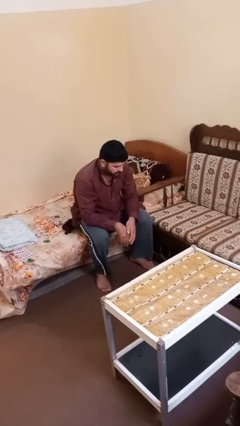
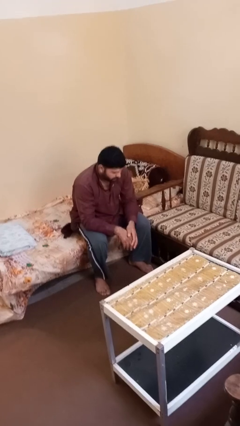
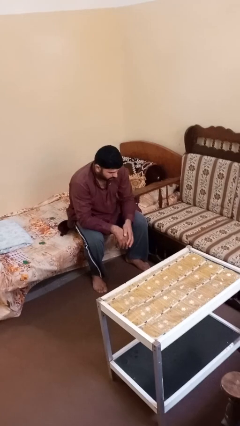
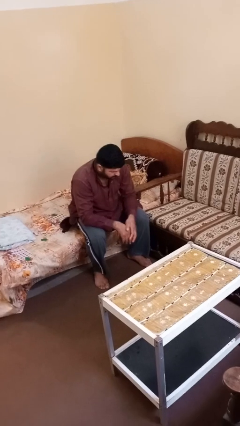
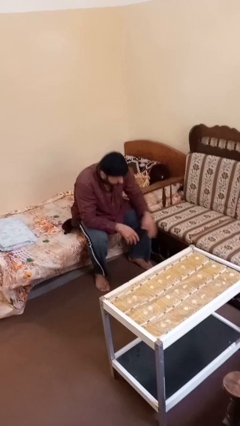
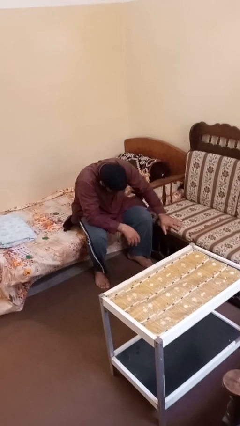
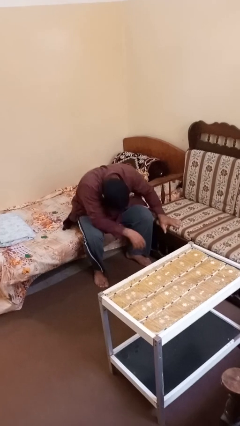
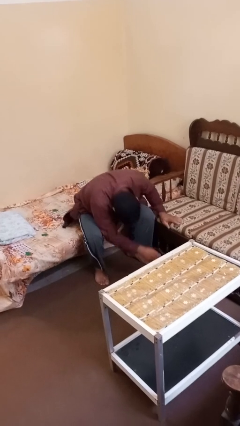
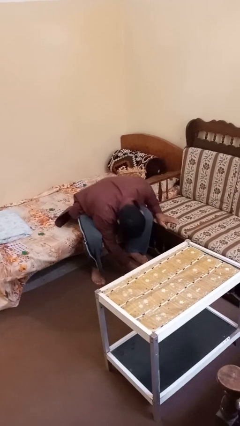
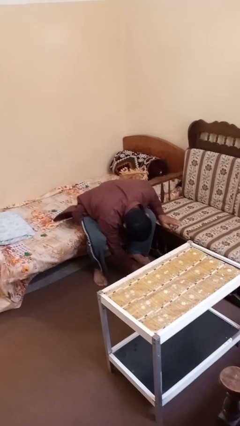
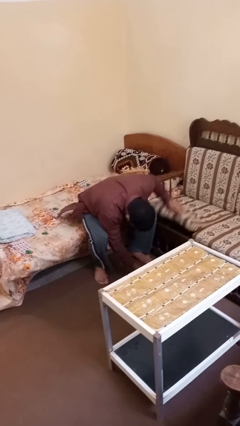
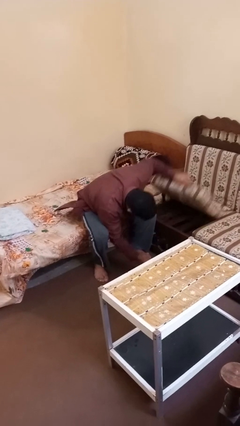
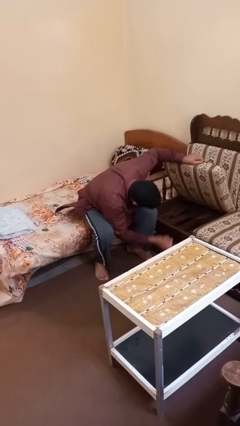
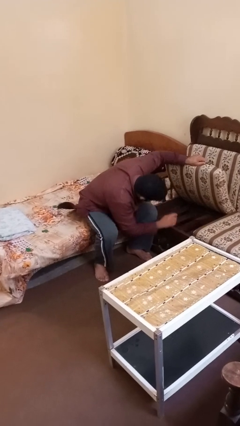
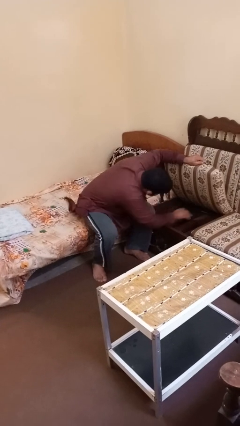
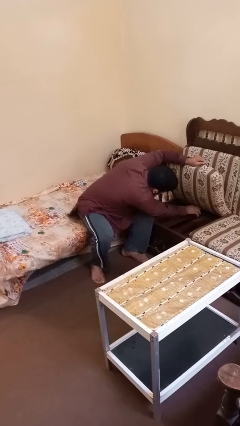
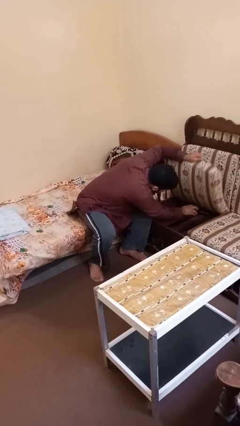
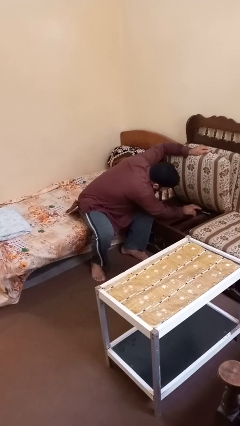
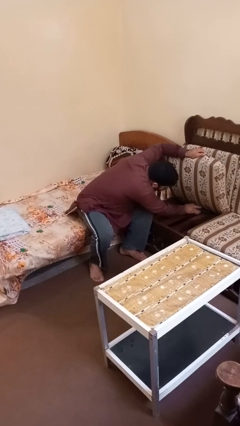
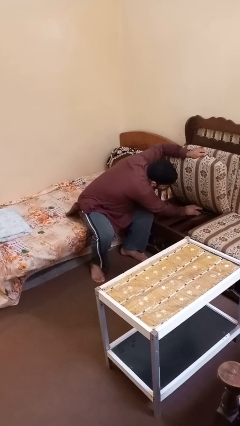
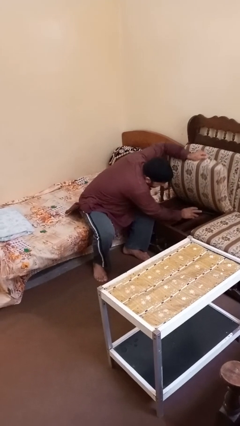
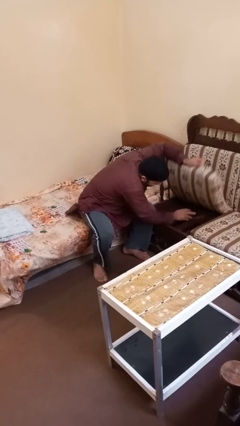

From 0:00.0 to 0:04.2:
person searches under couch

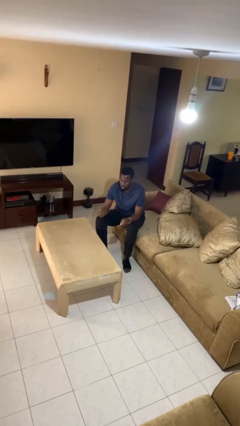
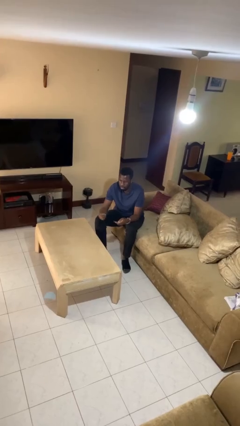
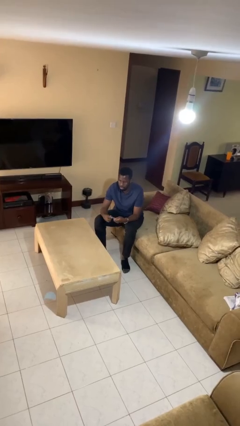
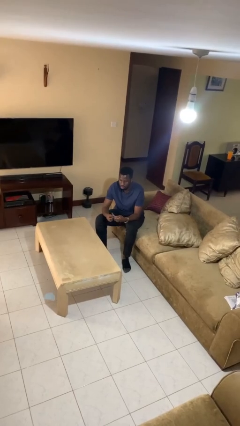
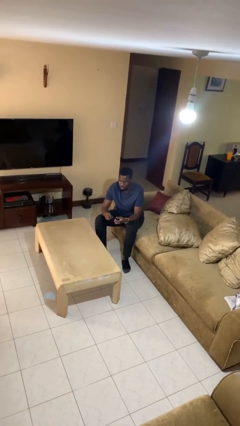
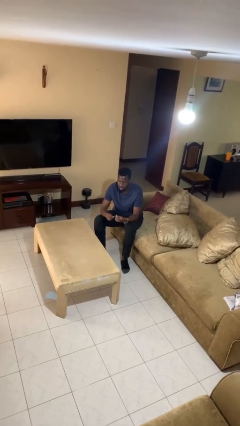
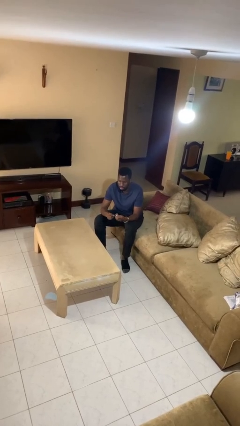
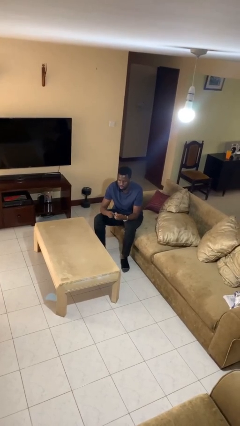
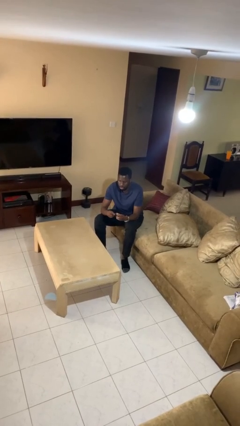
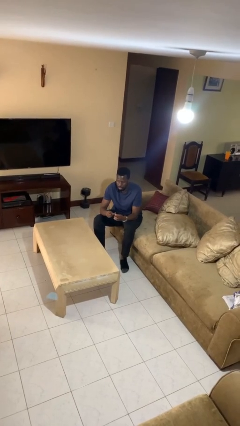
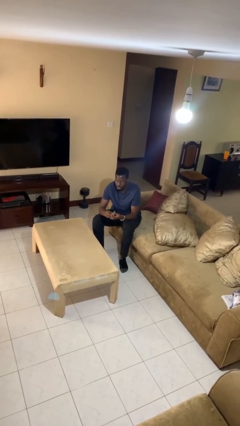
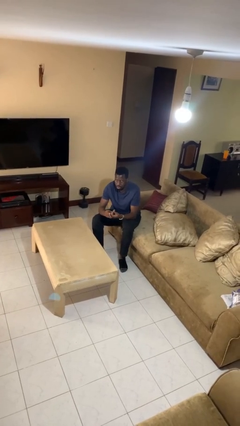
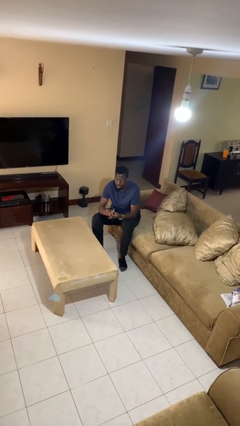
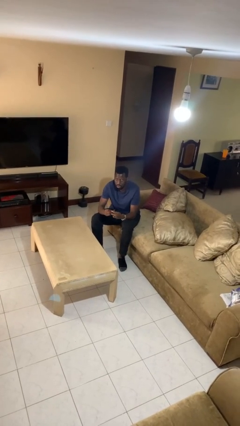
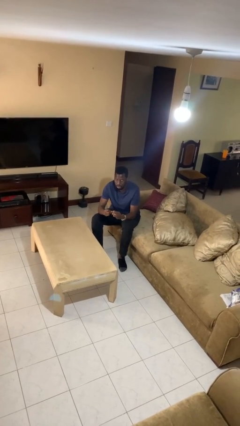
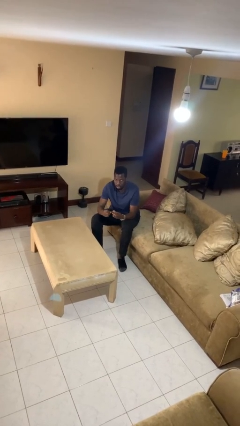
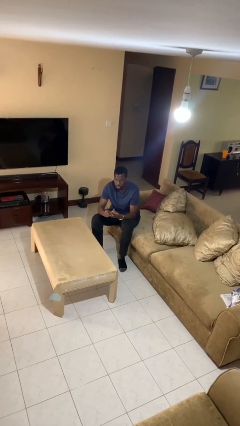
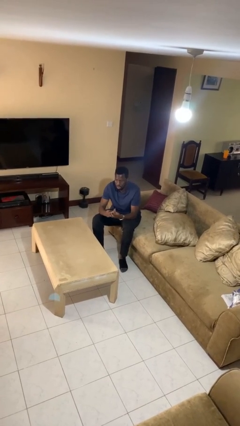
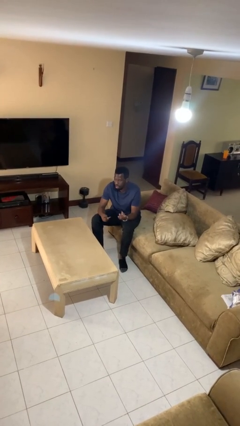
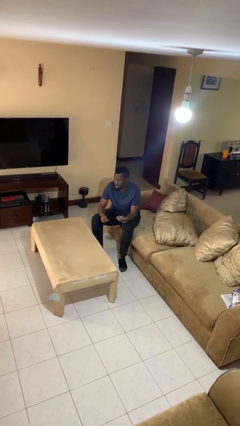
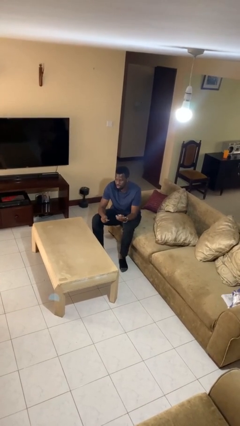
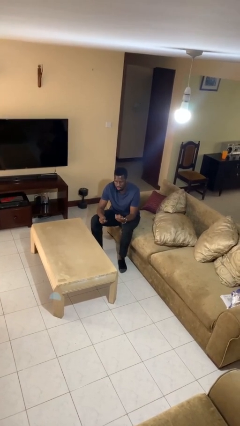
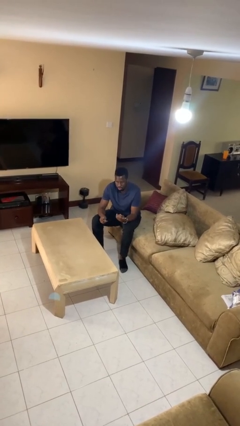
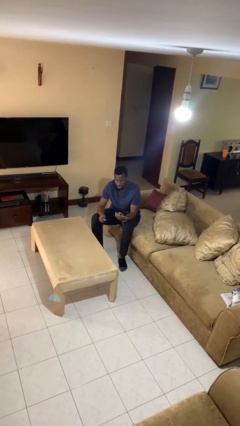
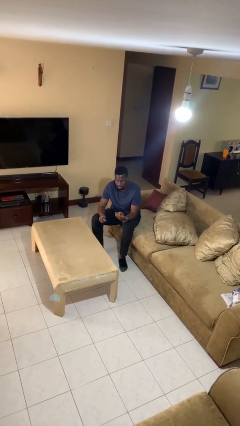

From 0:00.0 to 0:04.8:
person files fingernails

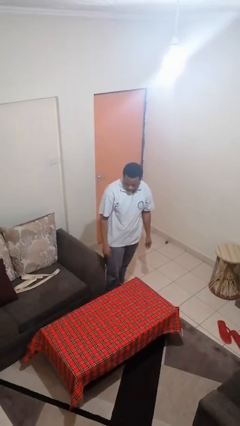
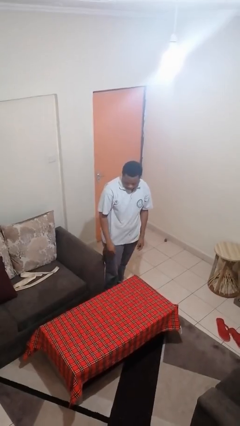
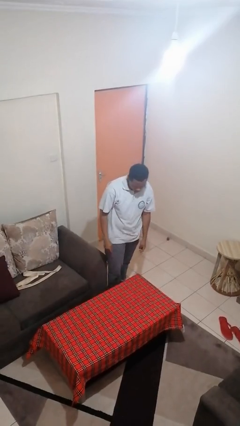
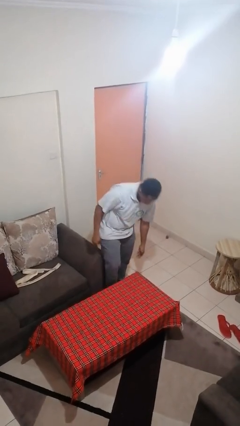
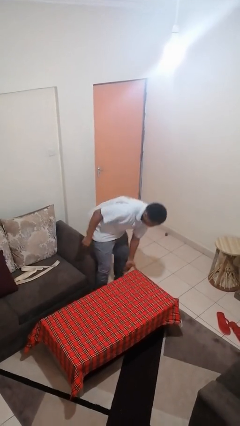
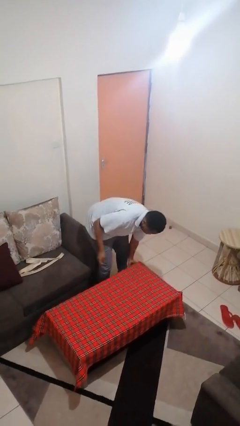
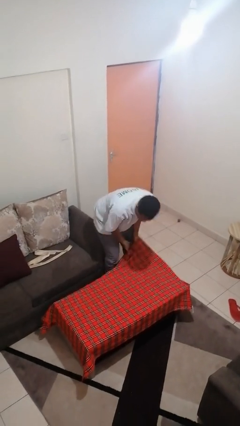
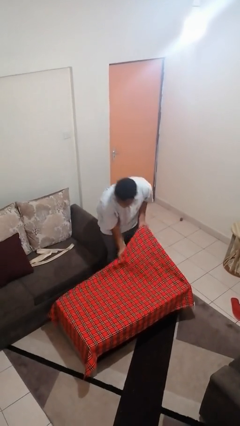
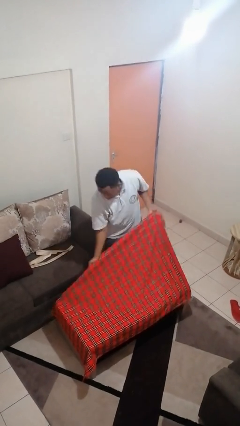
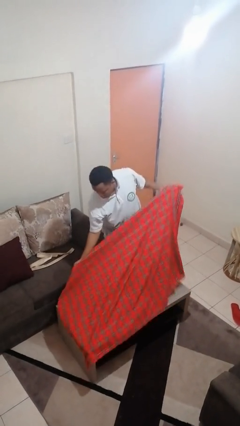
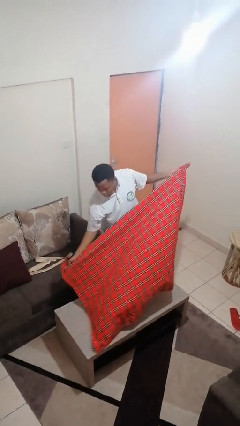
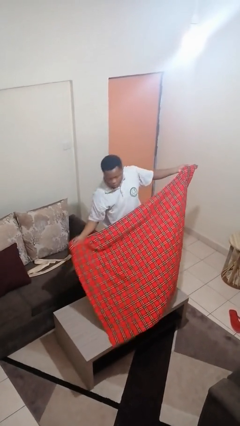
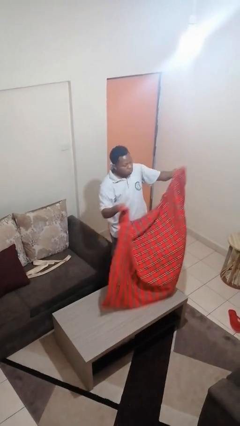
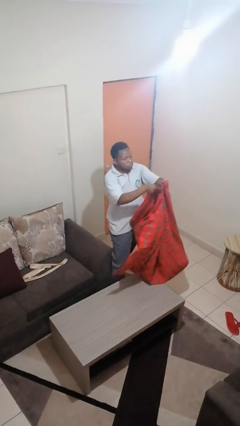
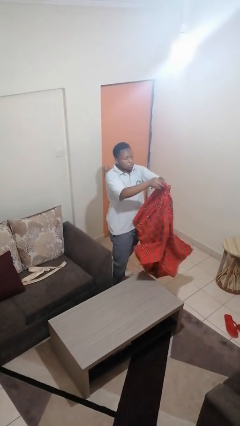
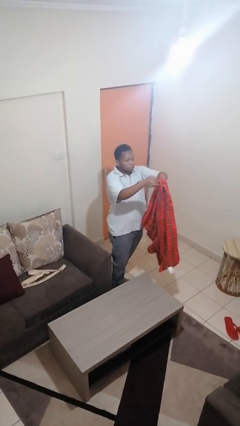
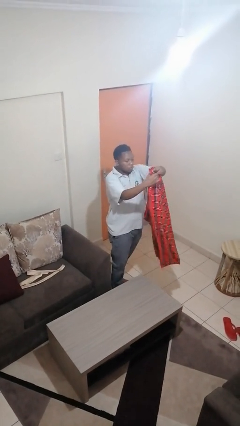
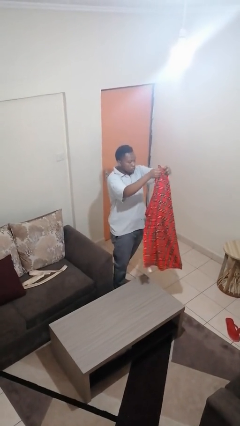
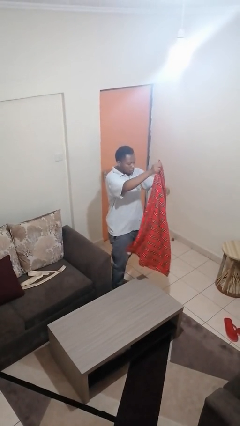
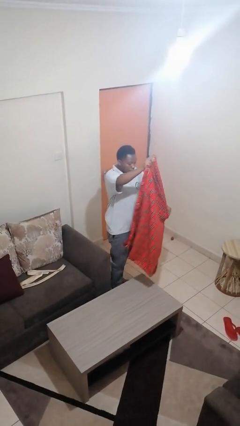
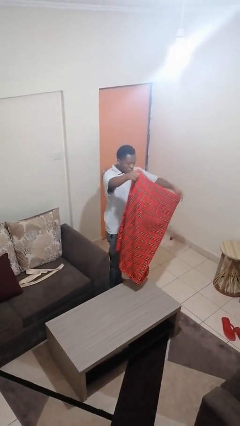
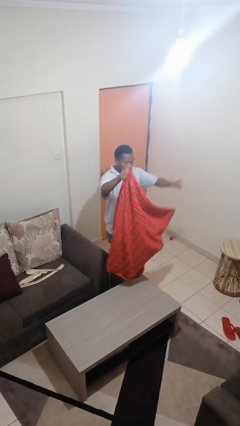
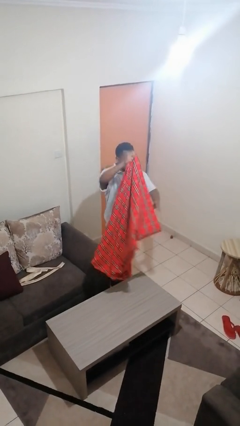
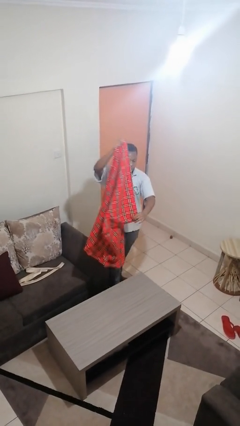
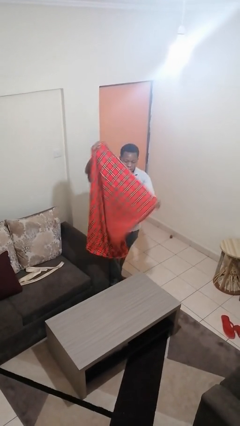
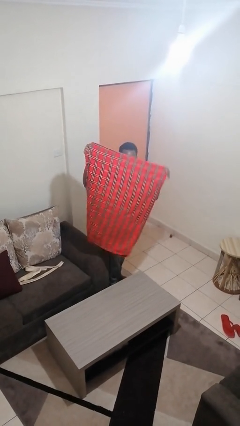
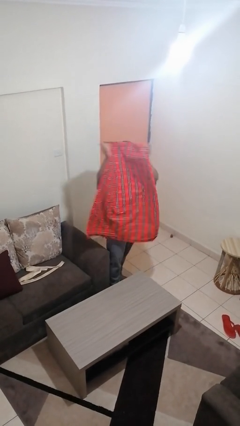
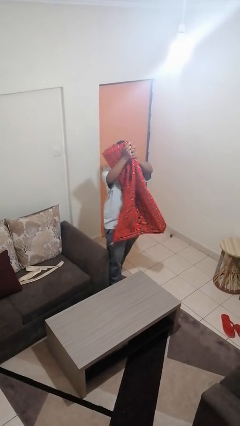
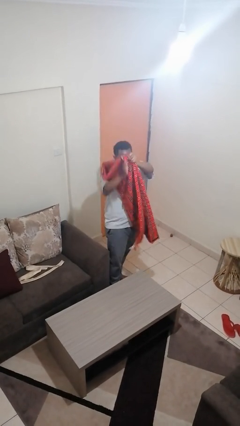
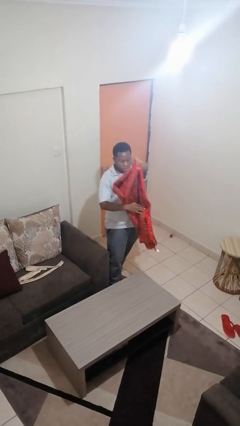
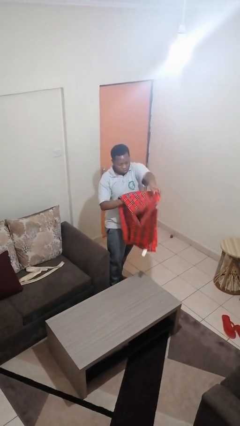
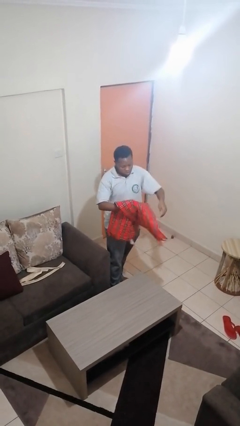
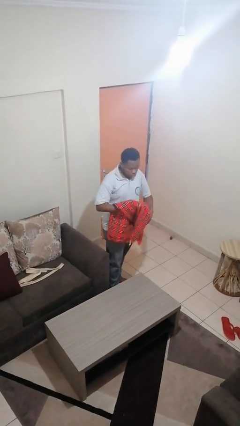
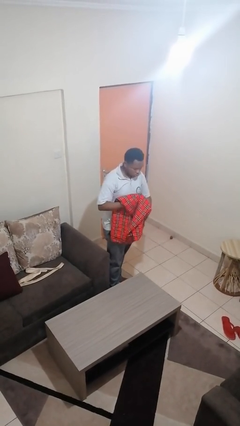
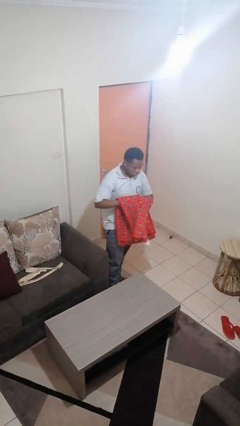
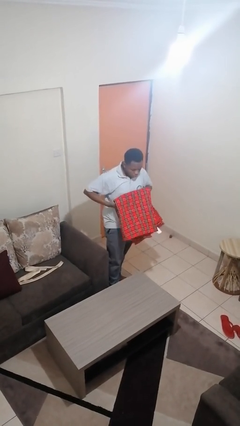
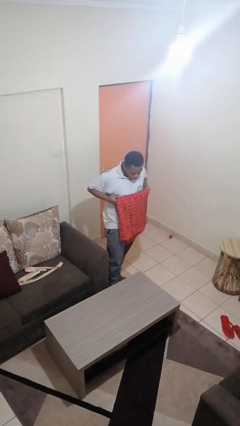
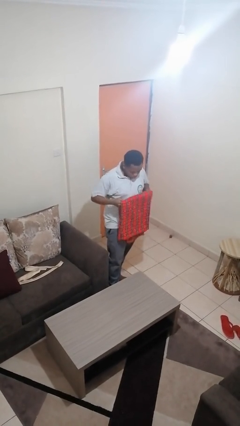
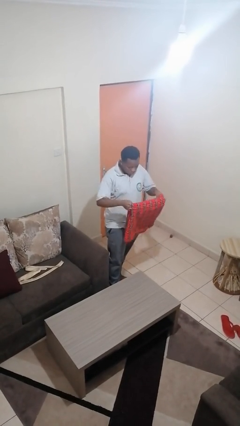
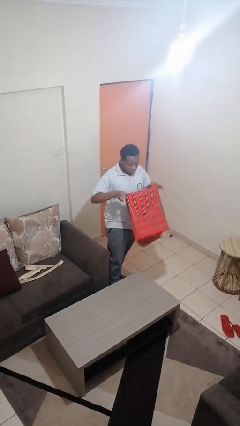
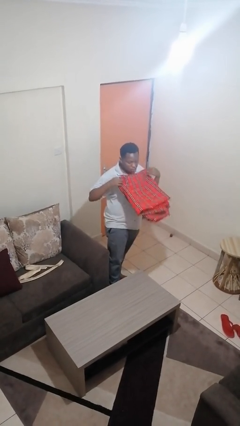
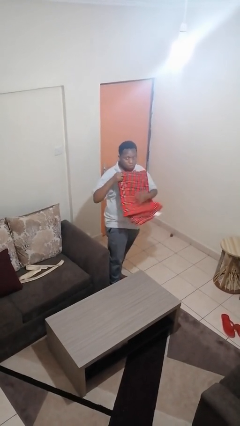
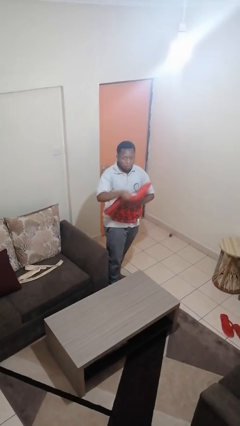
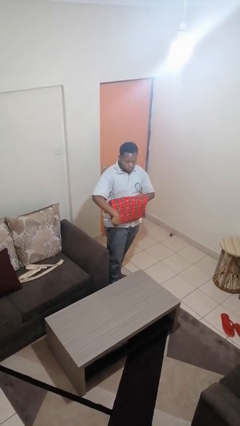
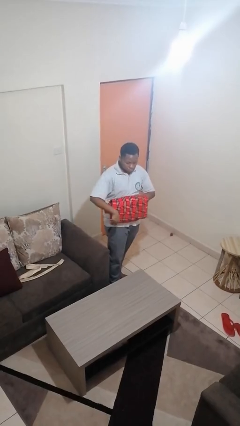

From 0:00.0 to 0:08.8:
person folds tablecloth

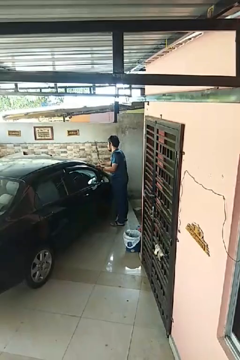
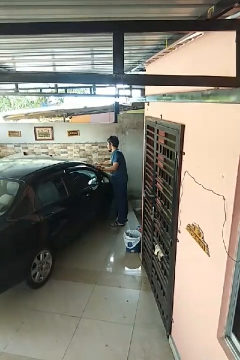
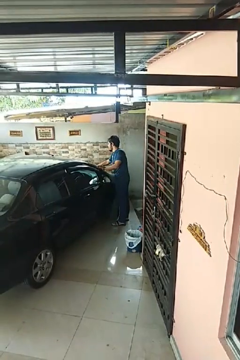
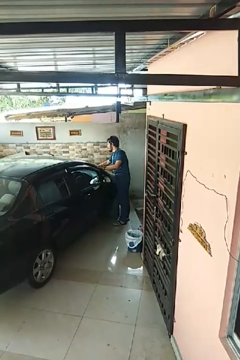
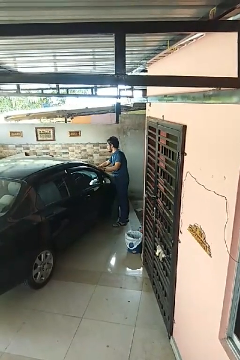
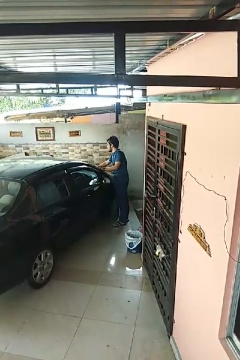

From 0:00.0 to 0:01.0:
person flips down car wipers
